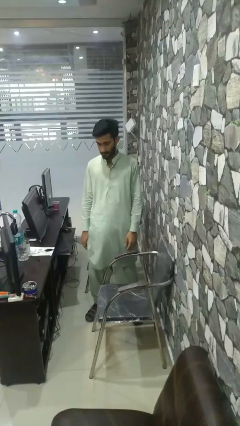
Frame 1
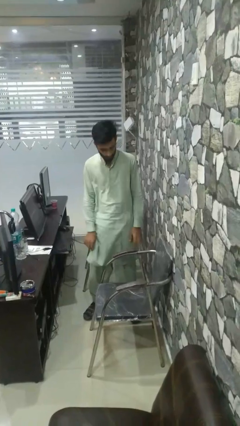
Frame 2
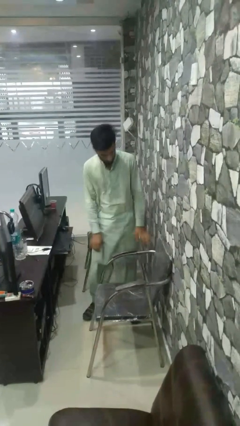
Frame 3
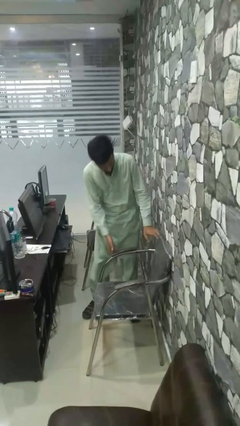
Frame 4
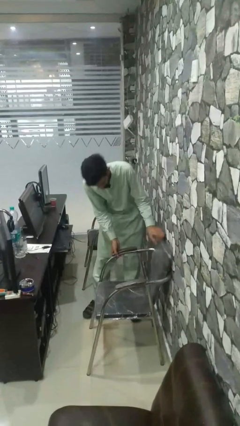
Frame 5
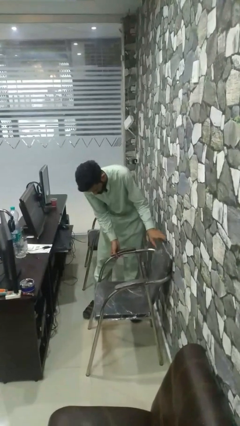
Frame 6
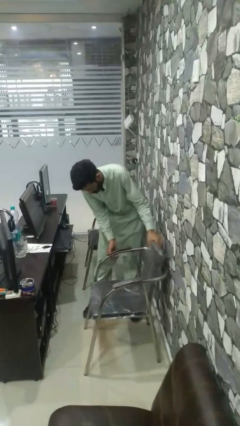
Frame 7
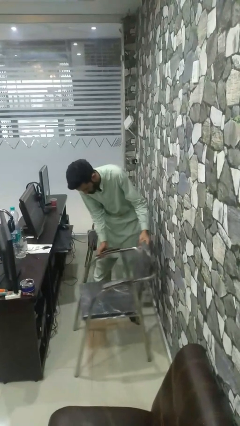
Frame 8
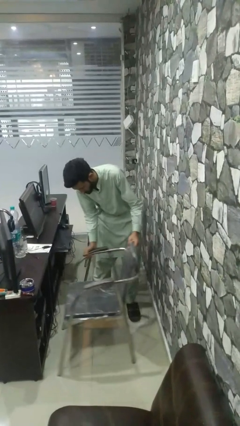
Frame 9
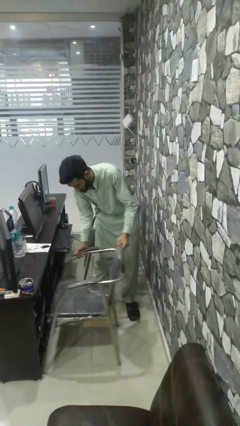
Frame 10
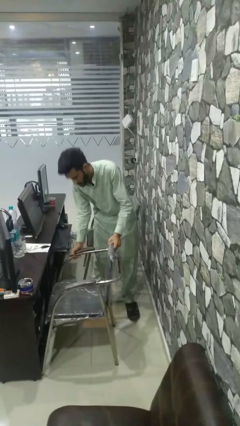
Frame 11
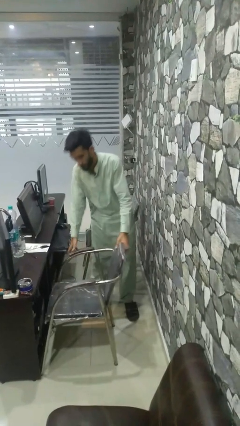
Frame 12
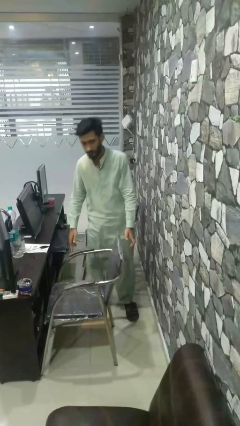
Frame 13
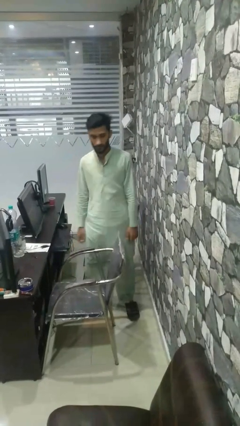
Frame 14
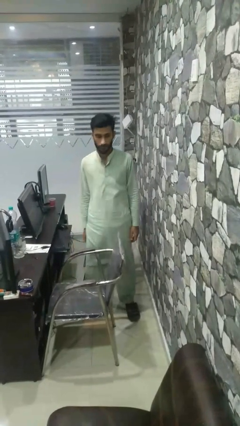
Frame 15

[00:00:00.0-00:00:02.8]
person pushes in chair

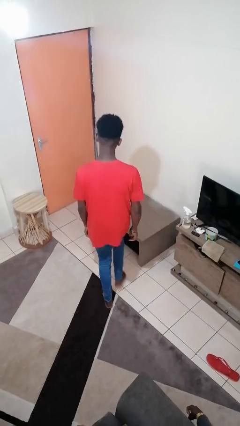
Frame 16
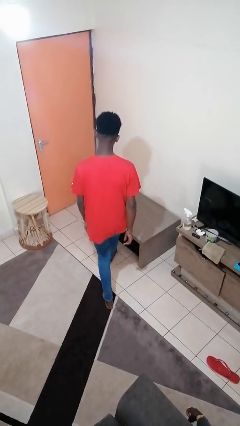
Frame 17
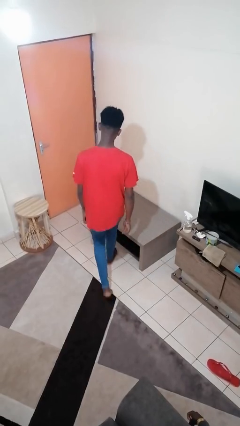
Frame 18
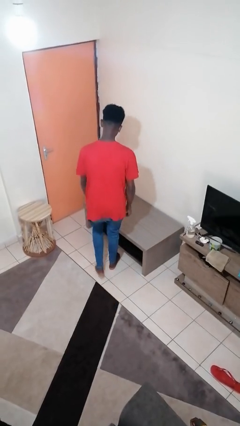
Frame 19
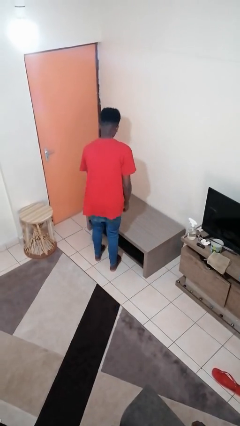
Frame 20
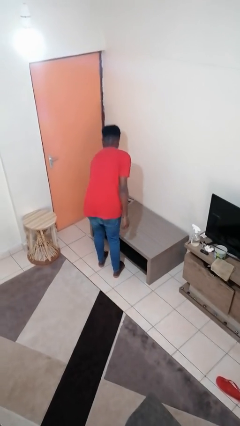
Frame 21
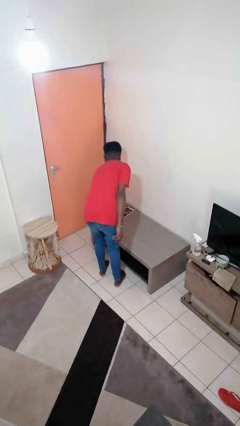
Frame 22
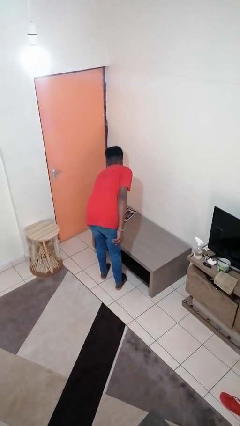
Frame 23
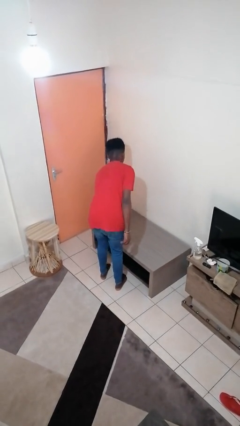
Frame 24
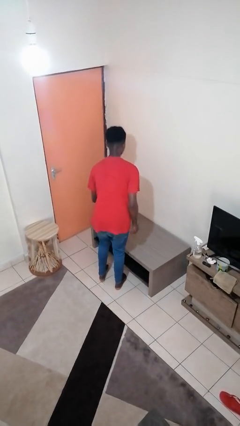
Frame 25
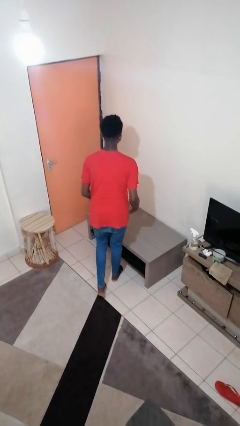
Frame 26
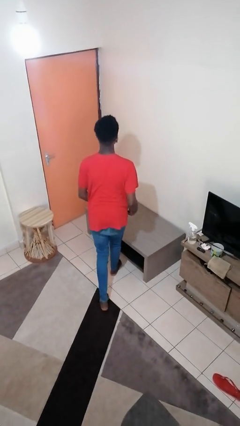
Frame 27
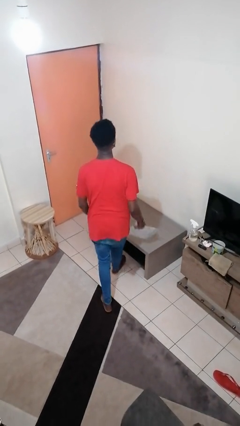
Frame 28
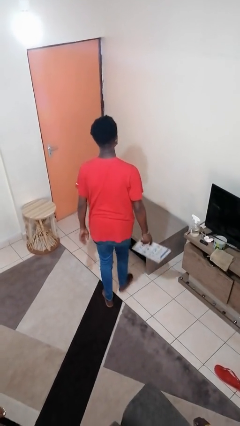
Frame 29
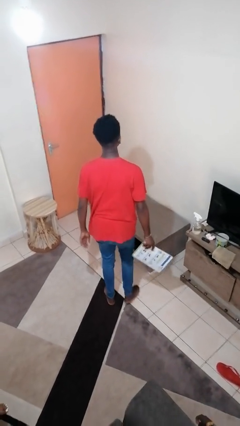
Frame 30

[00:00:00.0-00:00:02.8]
person picks up object from table

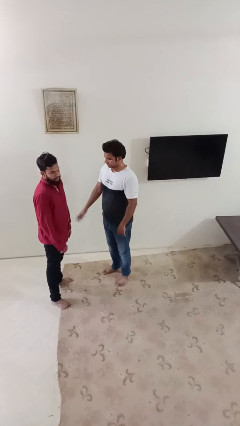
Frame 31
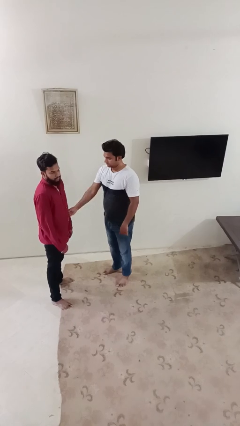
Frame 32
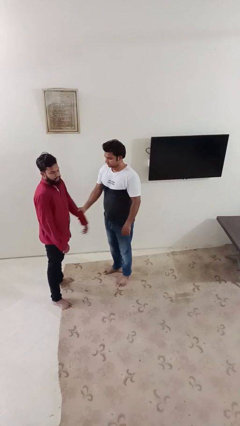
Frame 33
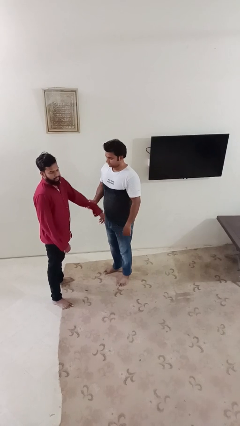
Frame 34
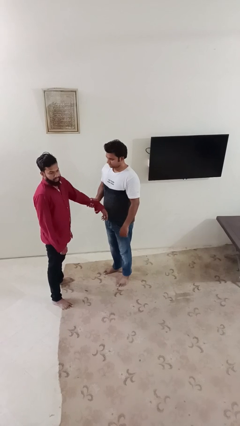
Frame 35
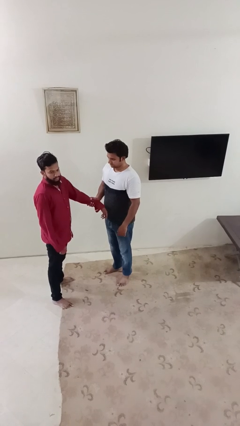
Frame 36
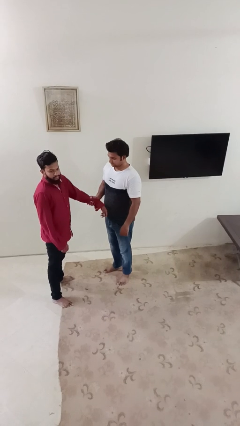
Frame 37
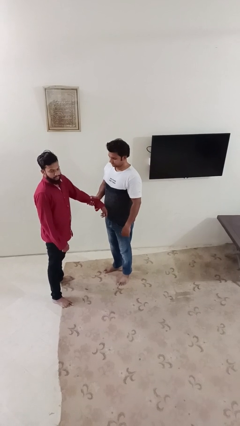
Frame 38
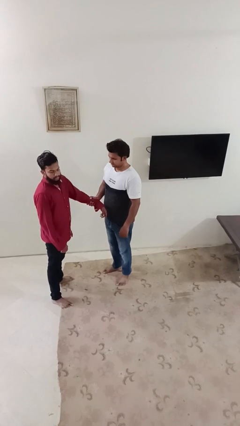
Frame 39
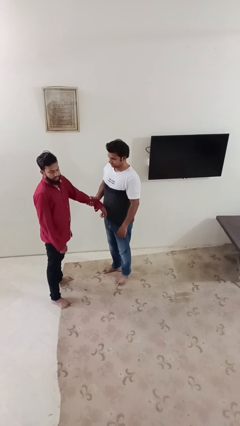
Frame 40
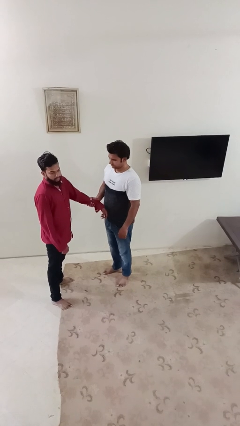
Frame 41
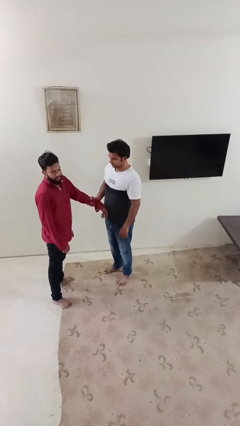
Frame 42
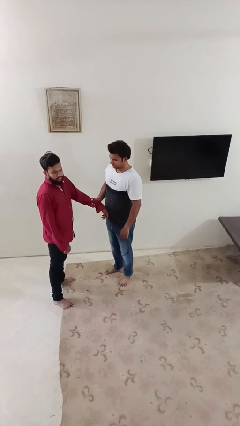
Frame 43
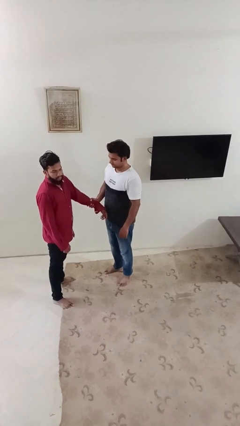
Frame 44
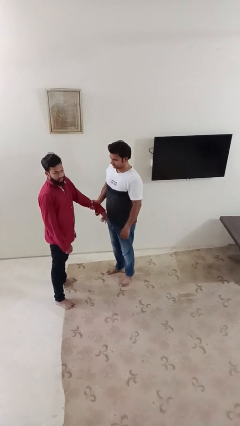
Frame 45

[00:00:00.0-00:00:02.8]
person grabs person by forearm

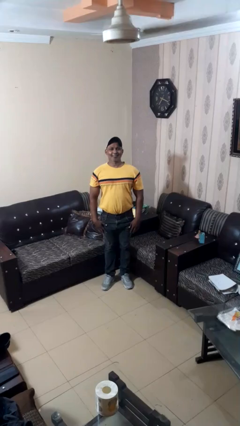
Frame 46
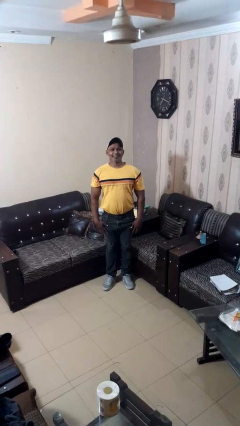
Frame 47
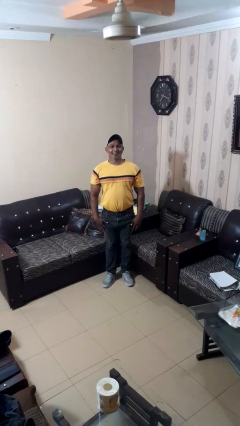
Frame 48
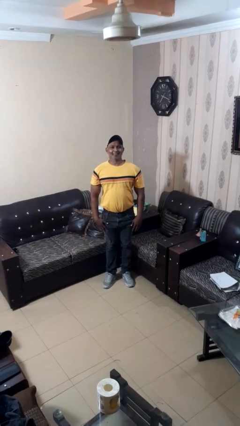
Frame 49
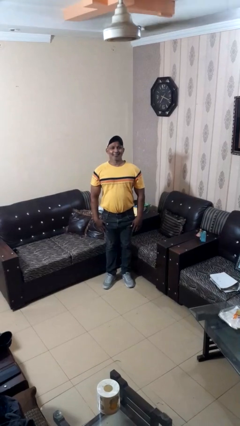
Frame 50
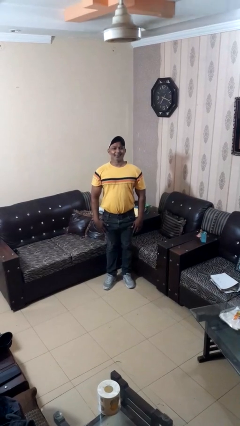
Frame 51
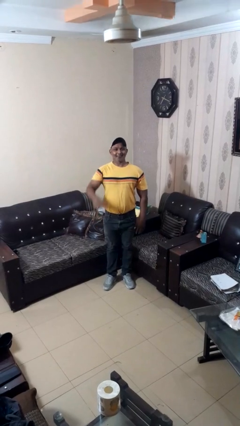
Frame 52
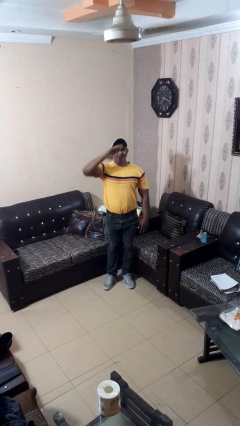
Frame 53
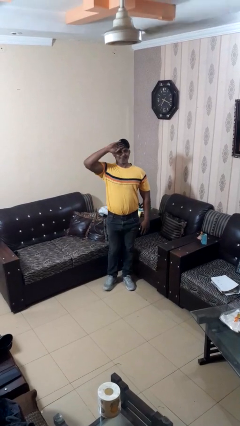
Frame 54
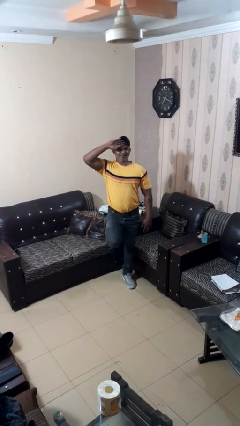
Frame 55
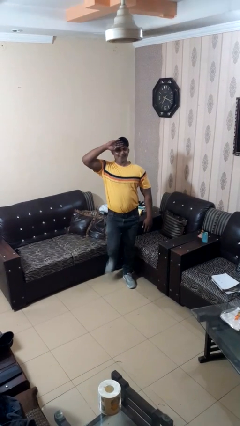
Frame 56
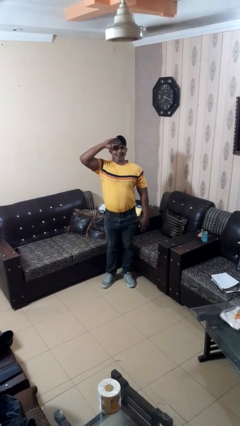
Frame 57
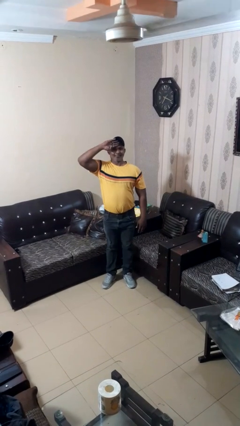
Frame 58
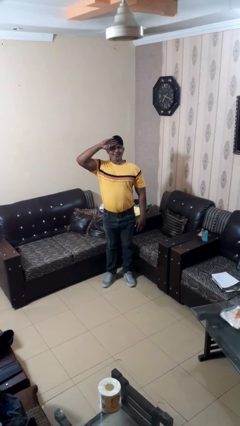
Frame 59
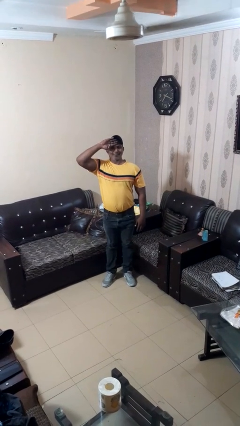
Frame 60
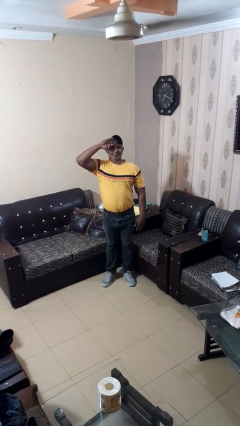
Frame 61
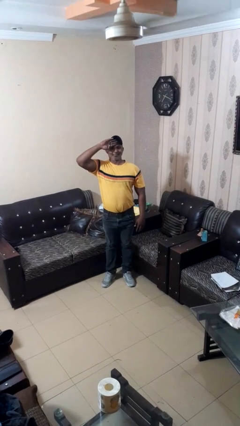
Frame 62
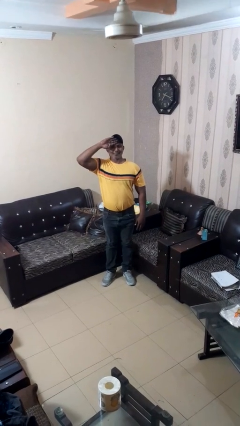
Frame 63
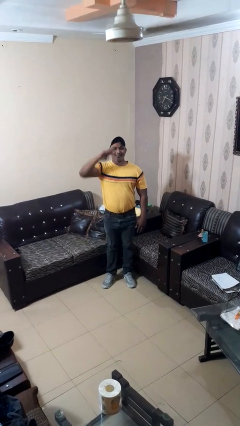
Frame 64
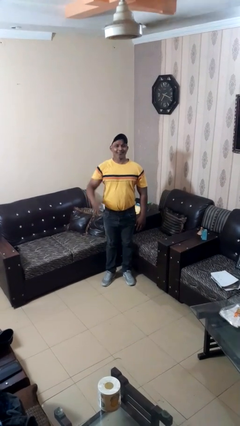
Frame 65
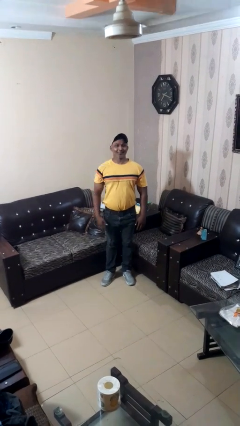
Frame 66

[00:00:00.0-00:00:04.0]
person salutes

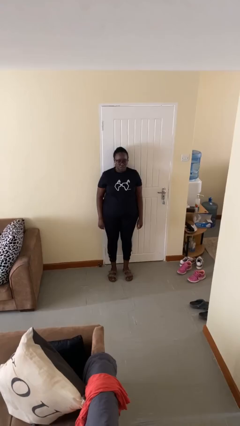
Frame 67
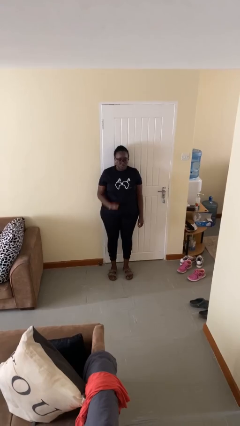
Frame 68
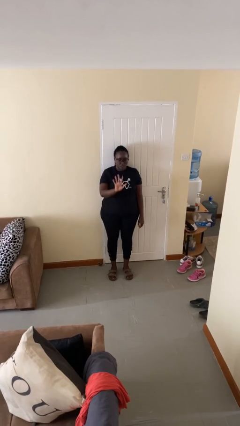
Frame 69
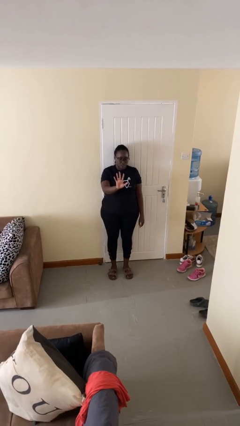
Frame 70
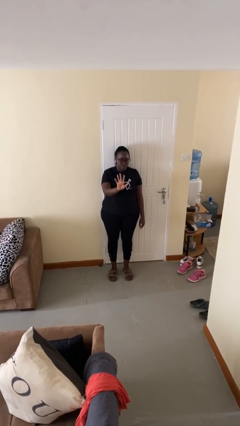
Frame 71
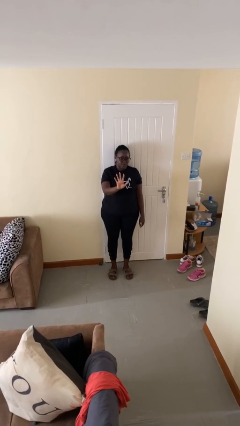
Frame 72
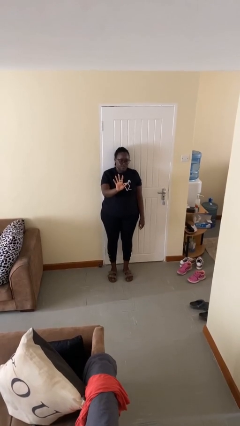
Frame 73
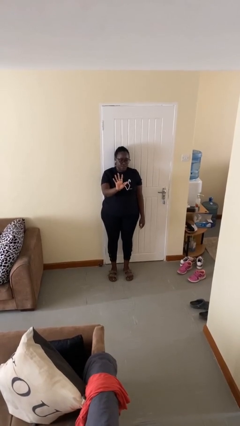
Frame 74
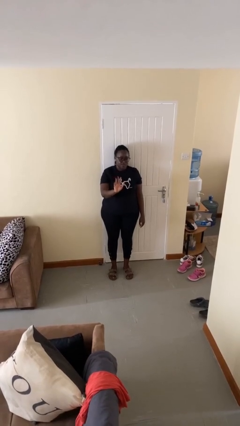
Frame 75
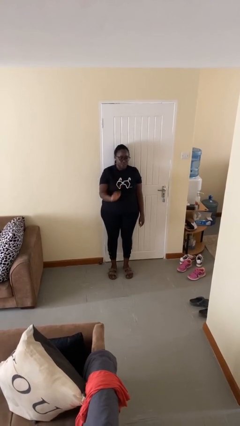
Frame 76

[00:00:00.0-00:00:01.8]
person gestures number five

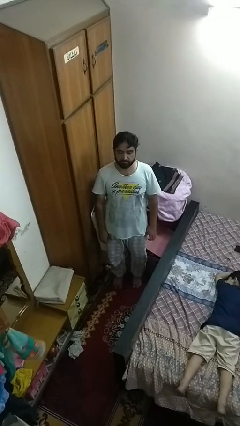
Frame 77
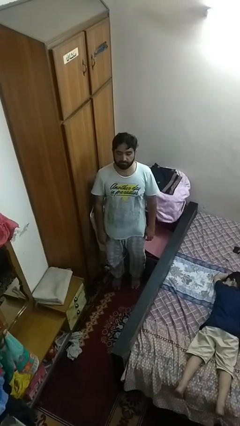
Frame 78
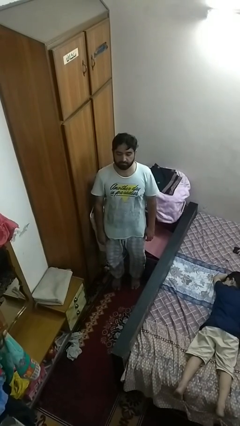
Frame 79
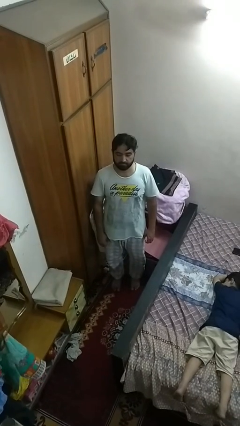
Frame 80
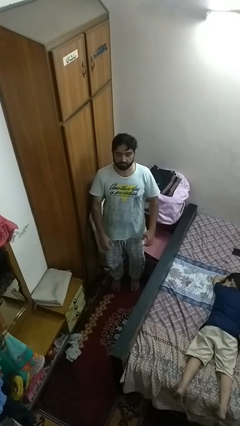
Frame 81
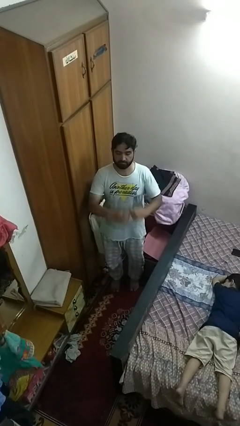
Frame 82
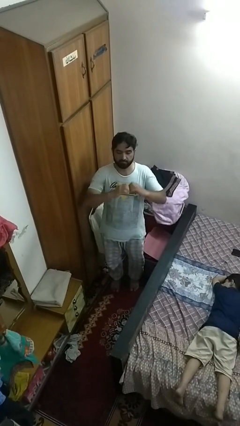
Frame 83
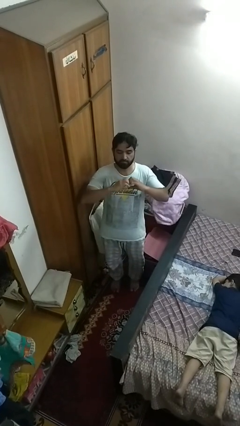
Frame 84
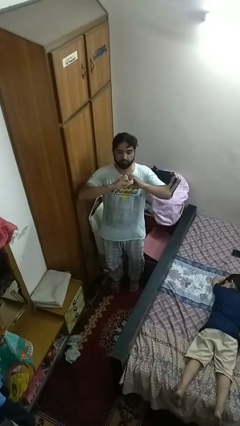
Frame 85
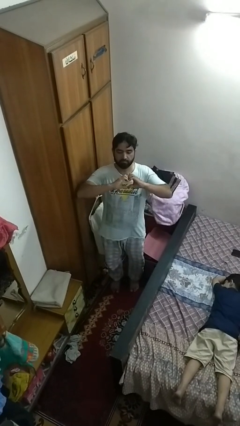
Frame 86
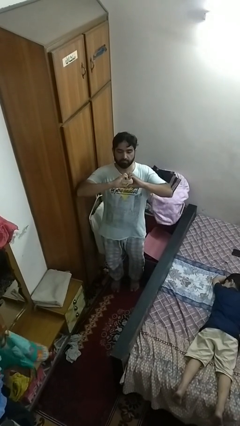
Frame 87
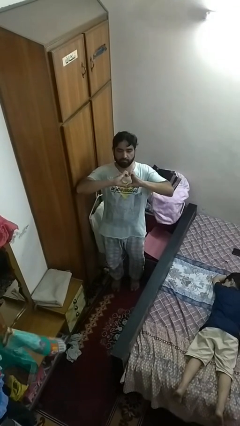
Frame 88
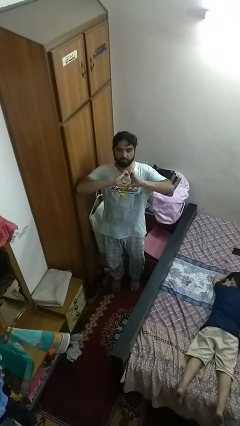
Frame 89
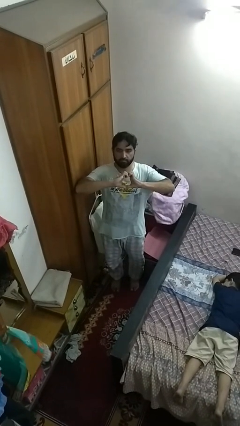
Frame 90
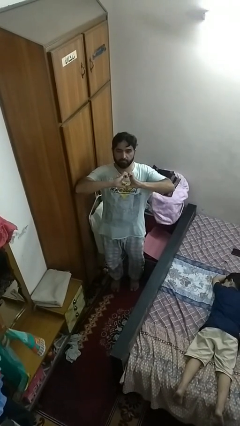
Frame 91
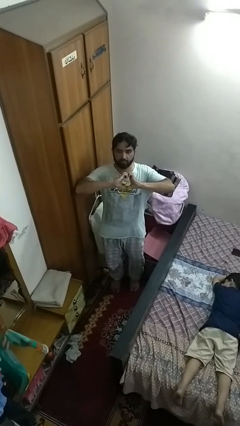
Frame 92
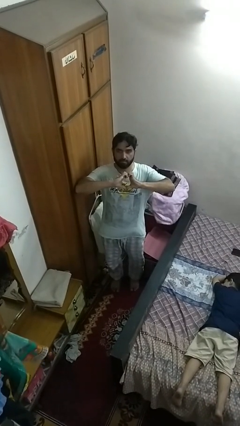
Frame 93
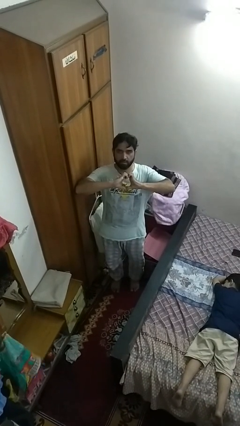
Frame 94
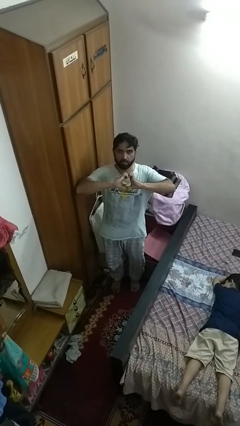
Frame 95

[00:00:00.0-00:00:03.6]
person gestures heart
